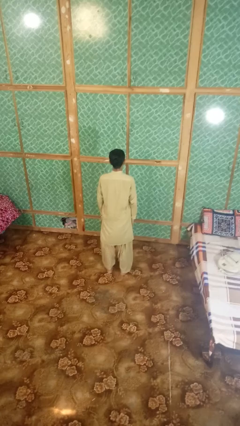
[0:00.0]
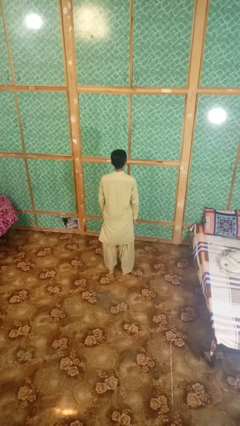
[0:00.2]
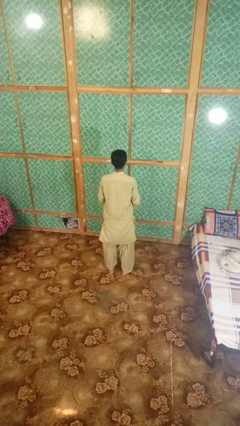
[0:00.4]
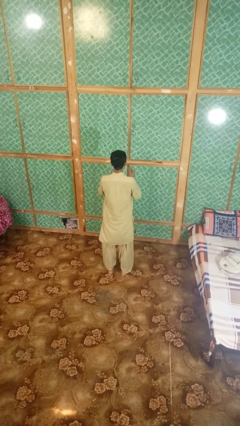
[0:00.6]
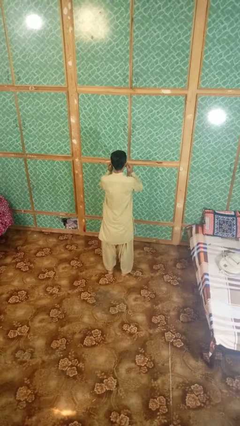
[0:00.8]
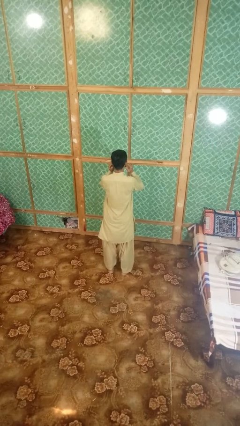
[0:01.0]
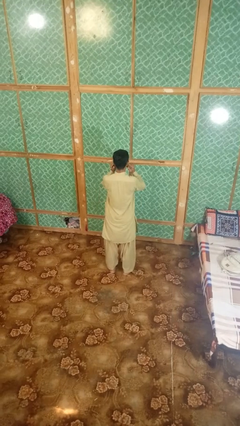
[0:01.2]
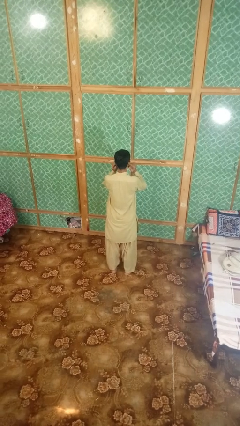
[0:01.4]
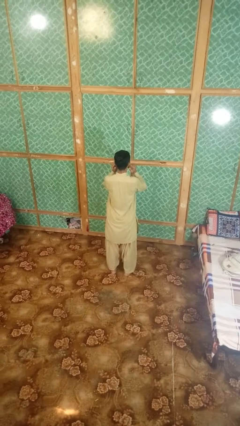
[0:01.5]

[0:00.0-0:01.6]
person puts fingers in ear

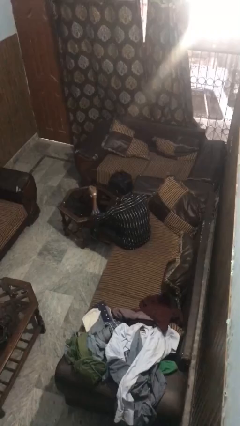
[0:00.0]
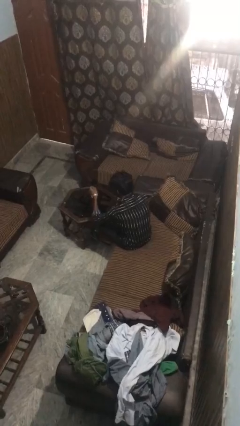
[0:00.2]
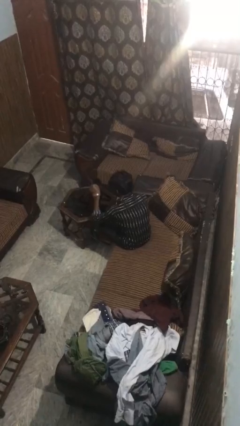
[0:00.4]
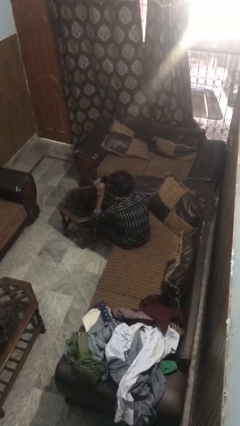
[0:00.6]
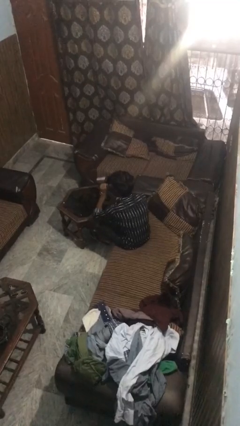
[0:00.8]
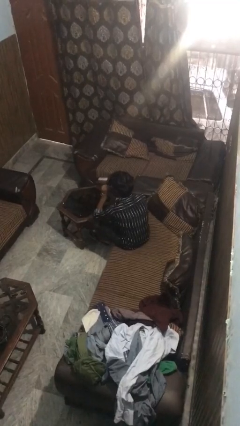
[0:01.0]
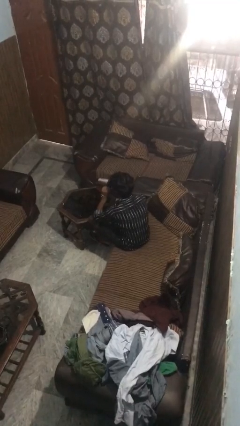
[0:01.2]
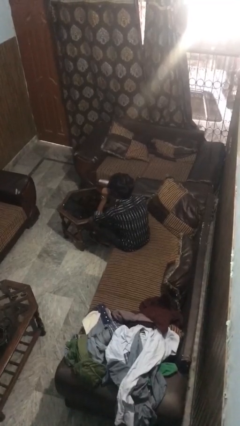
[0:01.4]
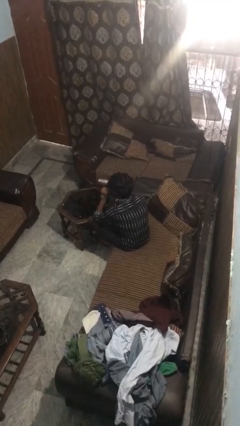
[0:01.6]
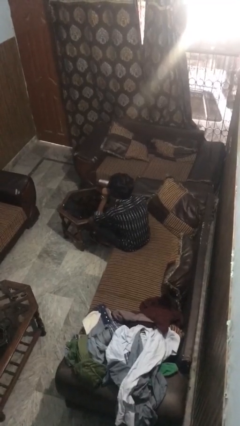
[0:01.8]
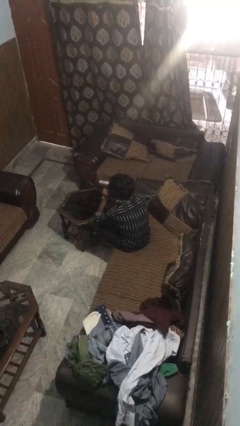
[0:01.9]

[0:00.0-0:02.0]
person drinks from mug

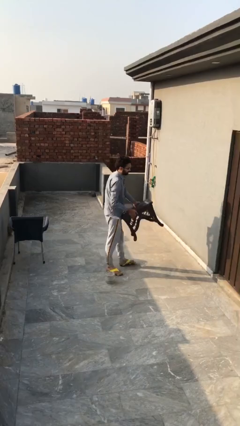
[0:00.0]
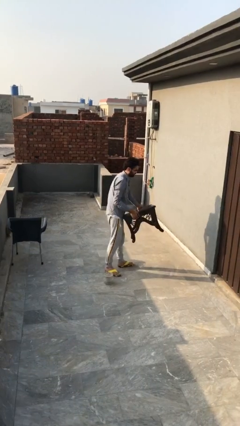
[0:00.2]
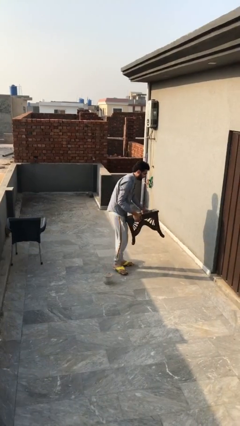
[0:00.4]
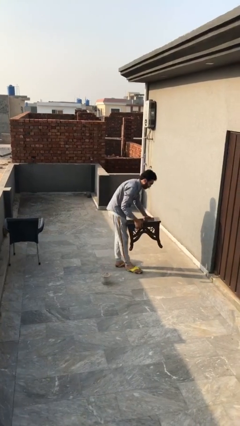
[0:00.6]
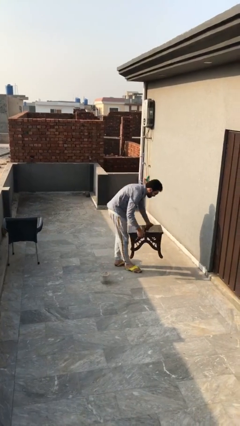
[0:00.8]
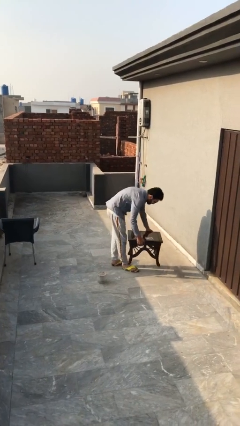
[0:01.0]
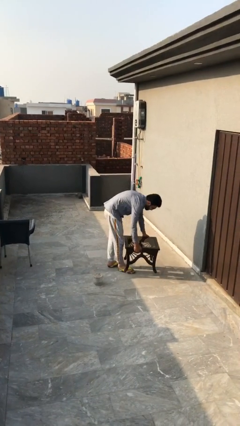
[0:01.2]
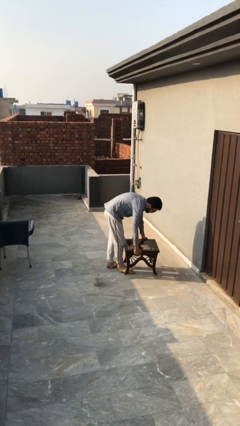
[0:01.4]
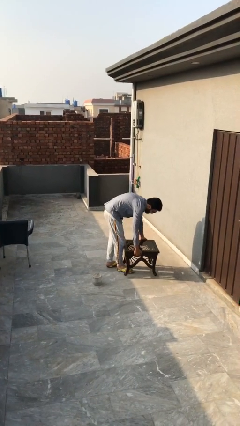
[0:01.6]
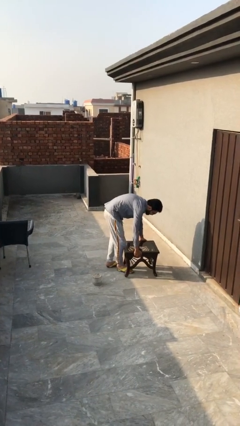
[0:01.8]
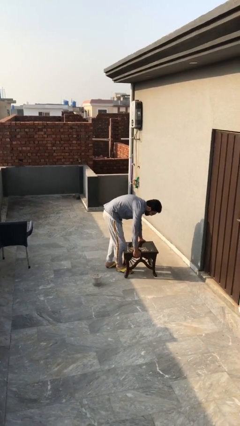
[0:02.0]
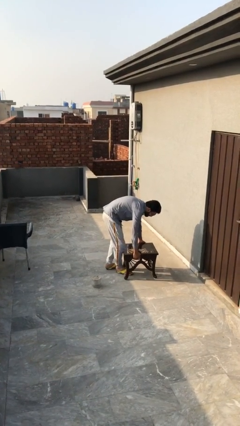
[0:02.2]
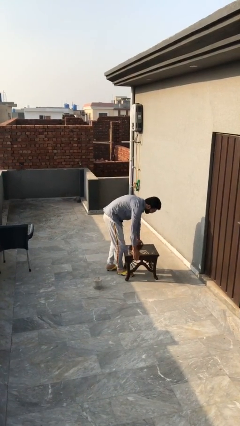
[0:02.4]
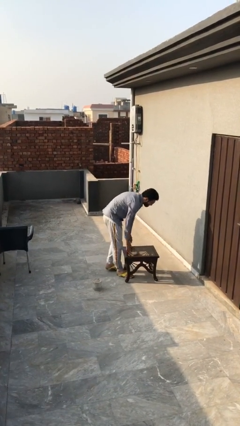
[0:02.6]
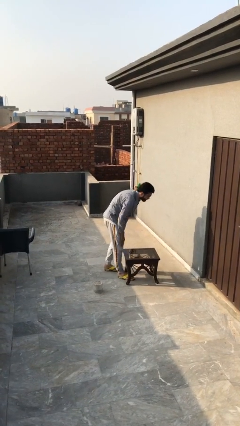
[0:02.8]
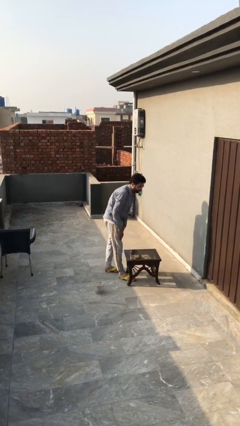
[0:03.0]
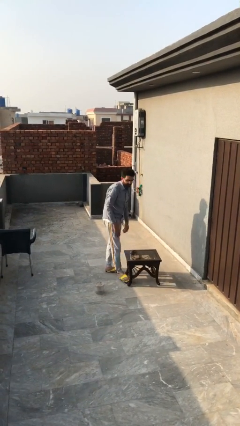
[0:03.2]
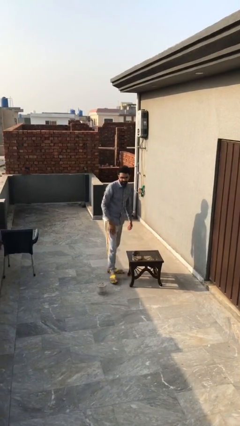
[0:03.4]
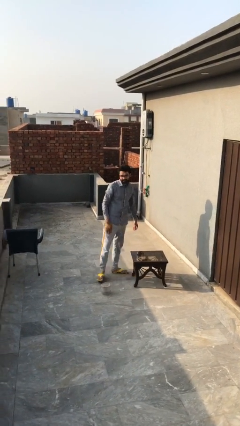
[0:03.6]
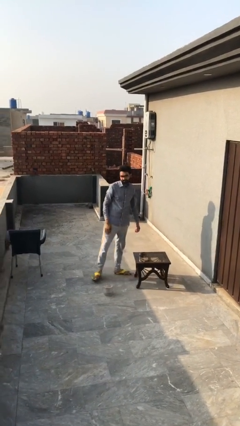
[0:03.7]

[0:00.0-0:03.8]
person puts down object on floor

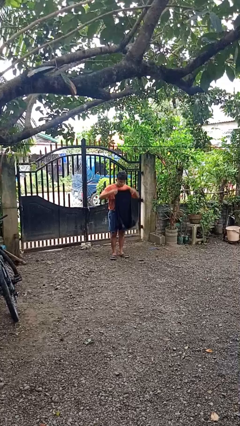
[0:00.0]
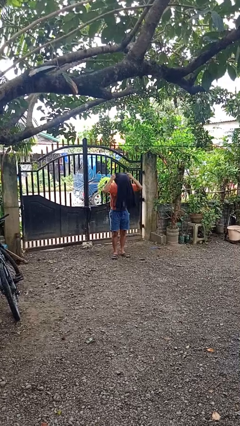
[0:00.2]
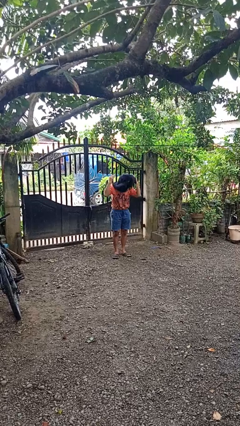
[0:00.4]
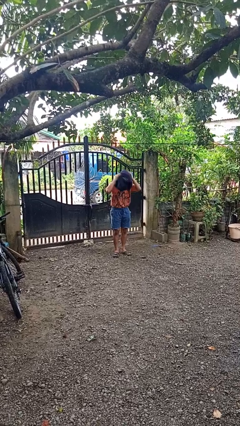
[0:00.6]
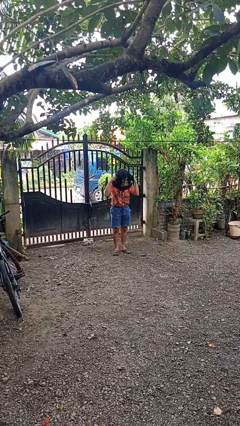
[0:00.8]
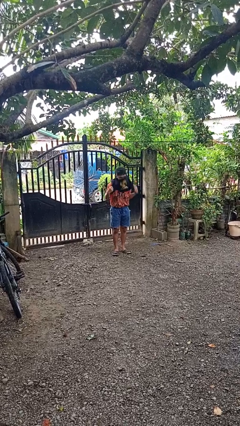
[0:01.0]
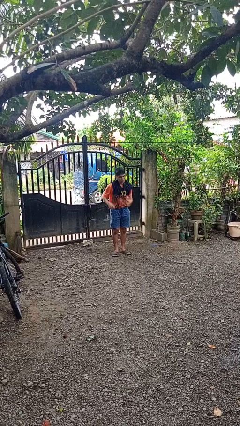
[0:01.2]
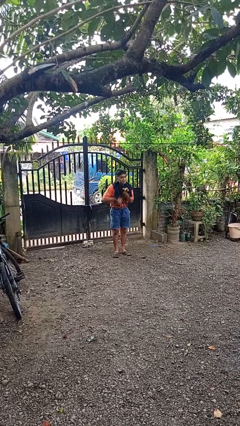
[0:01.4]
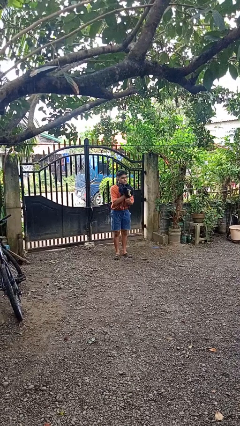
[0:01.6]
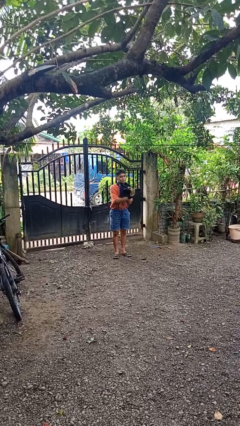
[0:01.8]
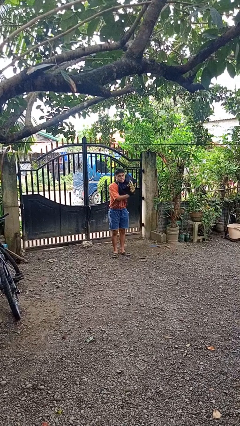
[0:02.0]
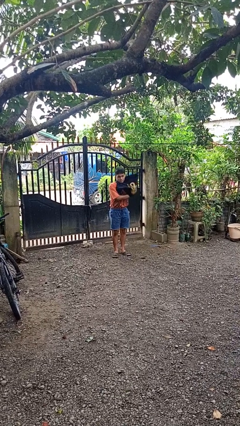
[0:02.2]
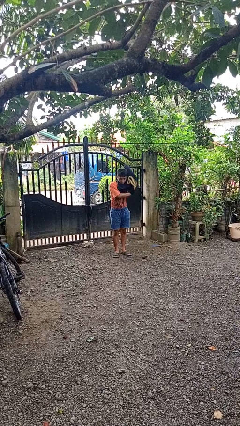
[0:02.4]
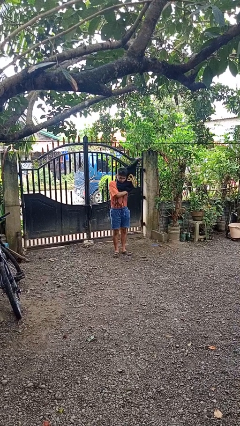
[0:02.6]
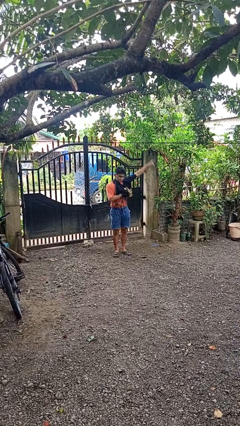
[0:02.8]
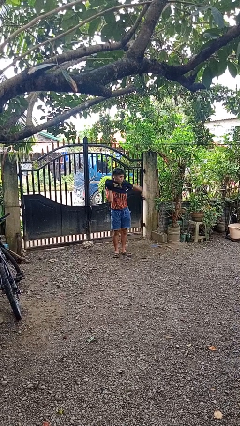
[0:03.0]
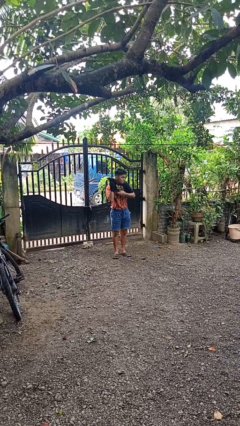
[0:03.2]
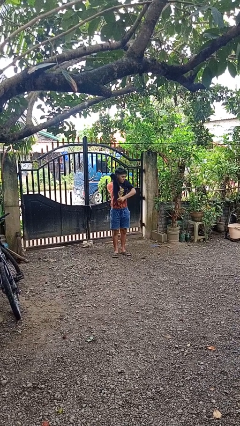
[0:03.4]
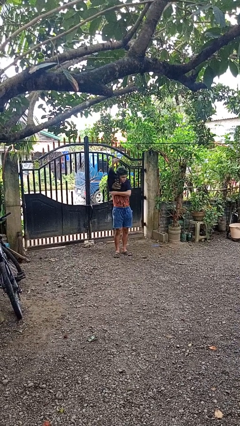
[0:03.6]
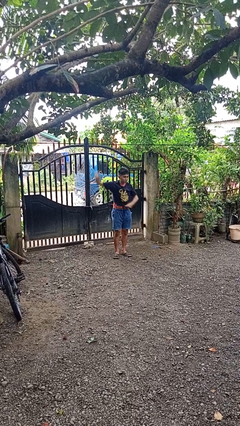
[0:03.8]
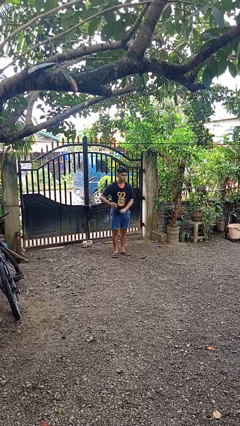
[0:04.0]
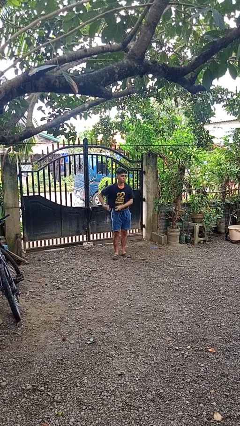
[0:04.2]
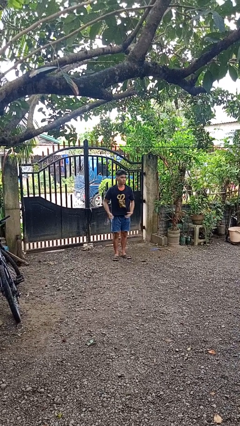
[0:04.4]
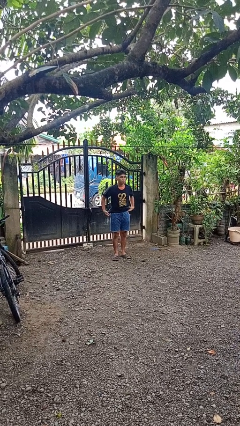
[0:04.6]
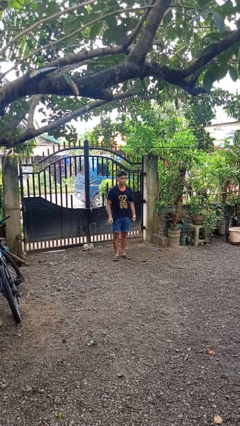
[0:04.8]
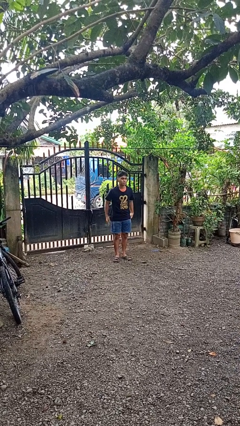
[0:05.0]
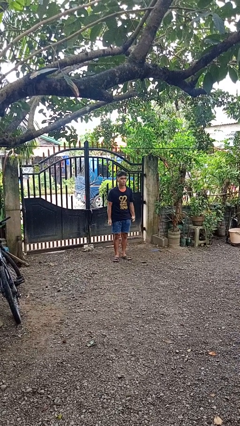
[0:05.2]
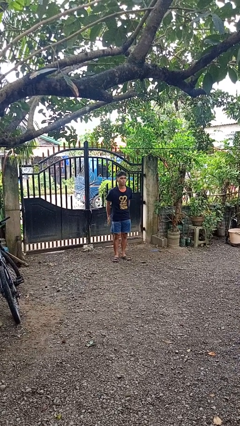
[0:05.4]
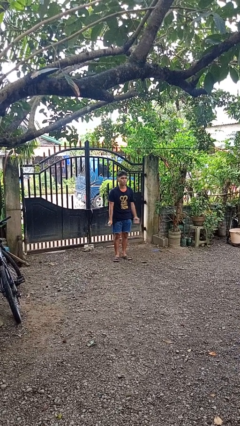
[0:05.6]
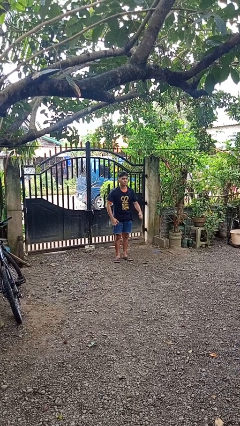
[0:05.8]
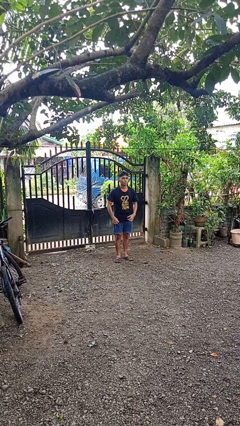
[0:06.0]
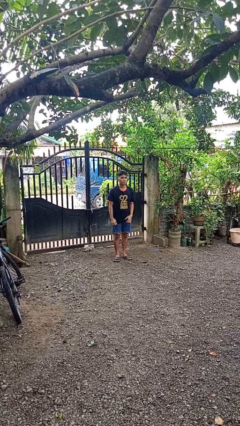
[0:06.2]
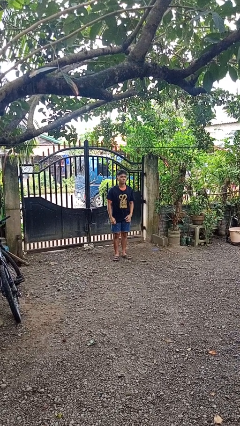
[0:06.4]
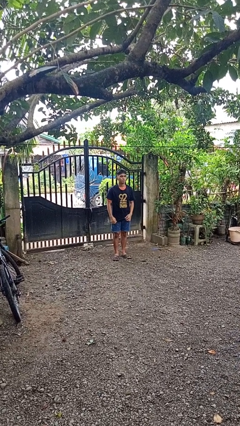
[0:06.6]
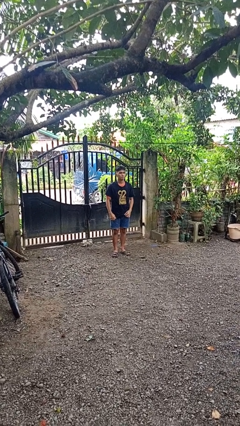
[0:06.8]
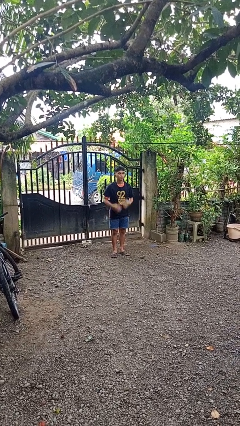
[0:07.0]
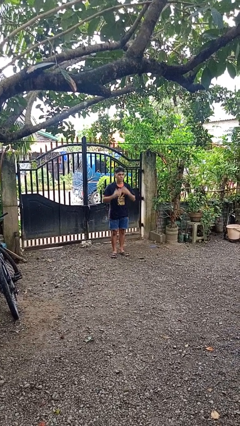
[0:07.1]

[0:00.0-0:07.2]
person puts on shirt

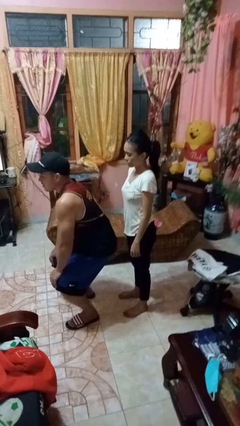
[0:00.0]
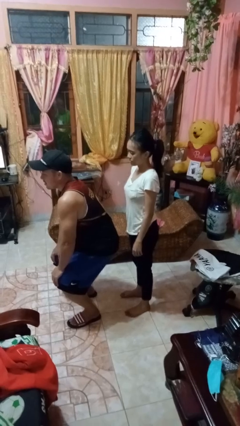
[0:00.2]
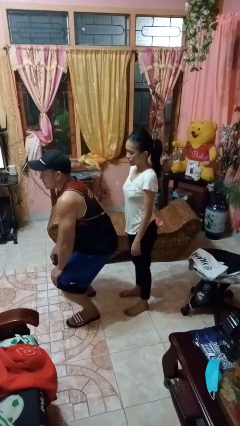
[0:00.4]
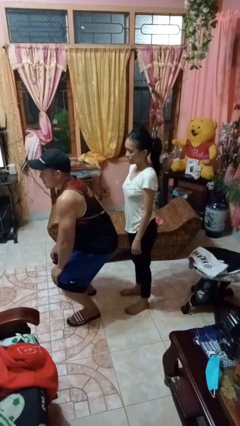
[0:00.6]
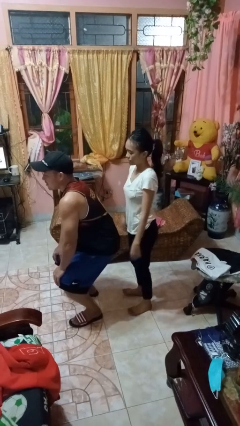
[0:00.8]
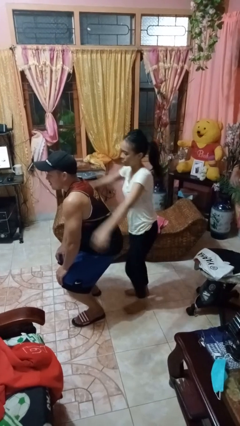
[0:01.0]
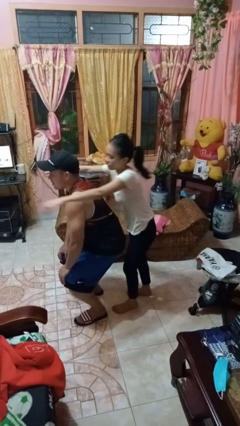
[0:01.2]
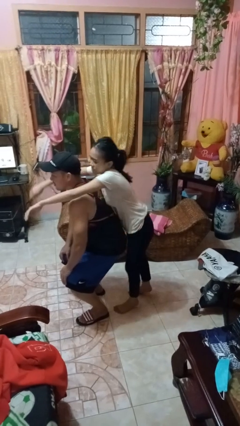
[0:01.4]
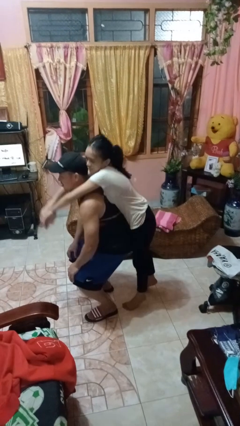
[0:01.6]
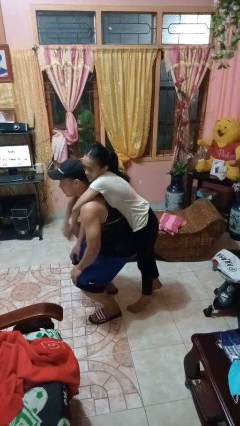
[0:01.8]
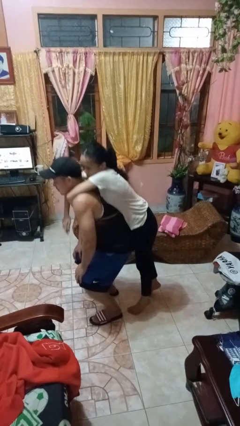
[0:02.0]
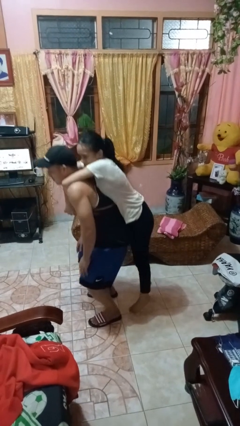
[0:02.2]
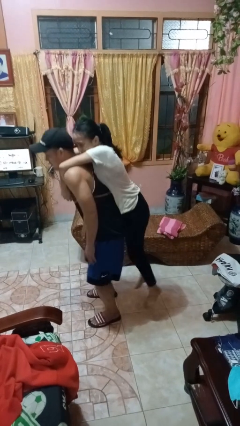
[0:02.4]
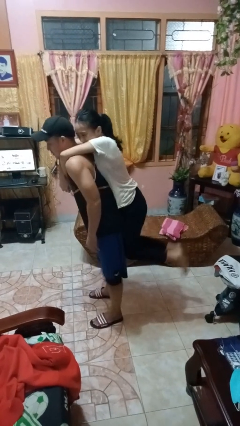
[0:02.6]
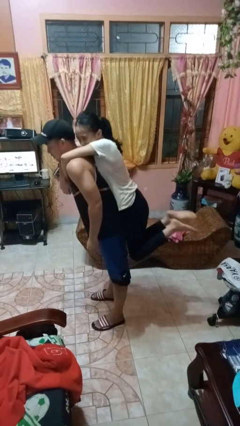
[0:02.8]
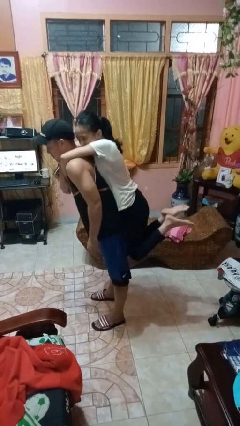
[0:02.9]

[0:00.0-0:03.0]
person picks up person

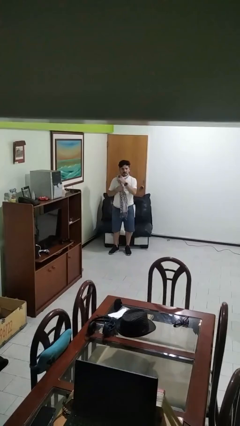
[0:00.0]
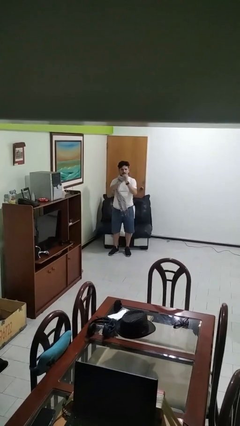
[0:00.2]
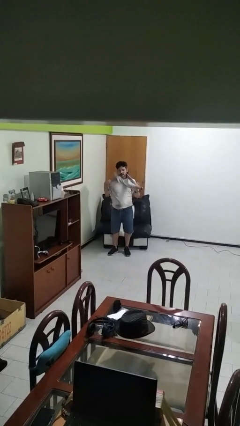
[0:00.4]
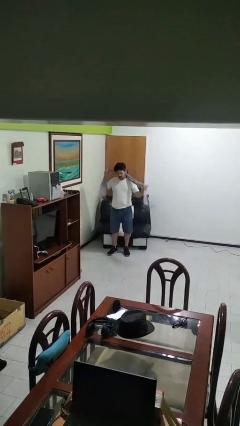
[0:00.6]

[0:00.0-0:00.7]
person takes off scarf
